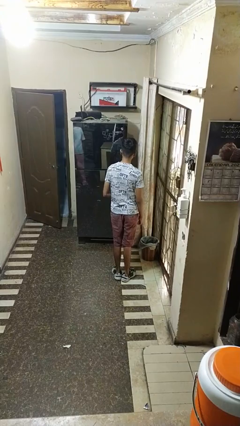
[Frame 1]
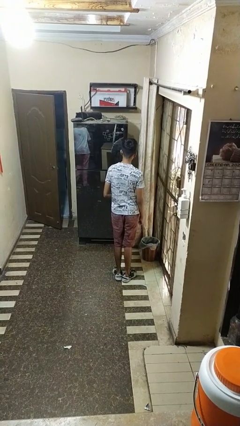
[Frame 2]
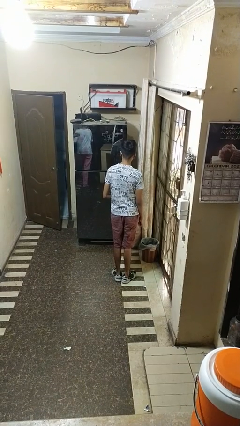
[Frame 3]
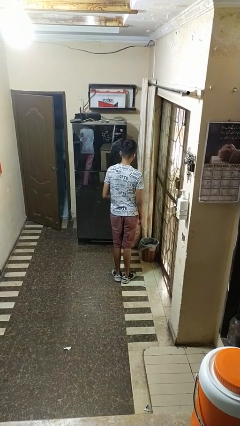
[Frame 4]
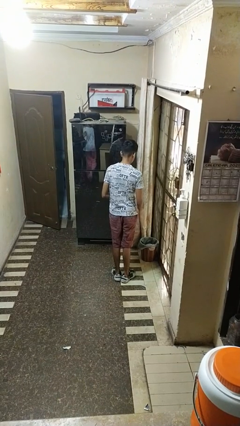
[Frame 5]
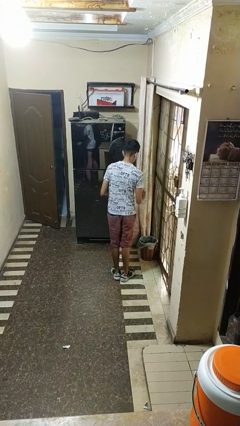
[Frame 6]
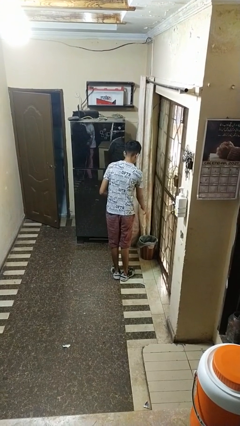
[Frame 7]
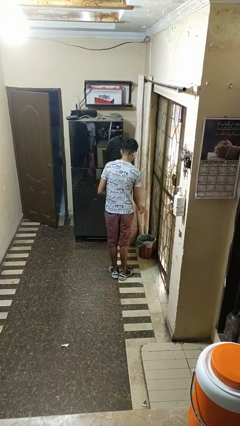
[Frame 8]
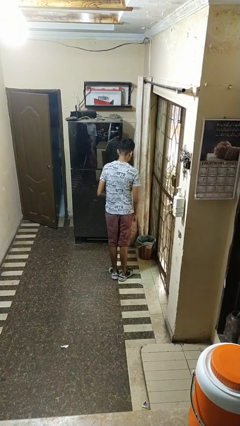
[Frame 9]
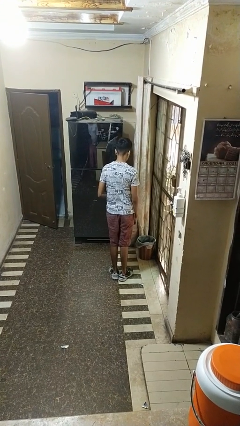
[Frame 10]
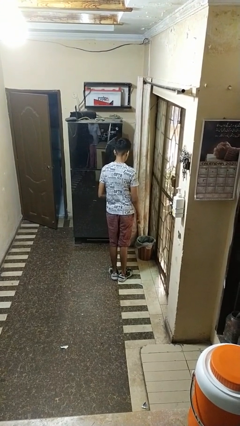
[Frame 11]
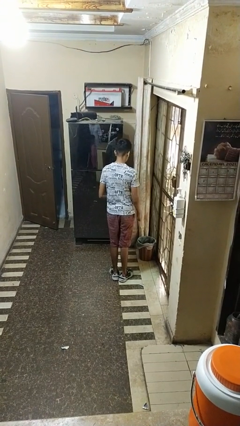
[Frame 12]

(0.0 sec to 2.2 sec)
person discards trash

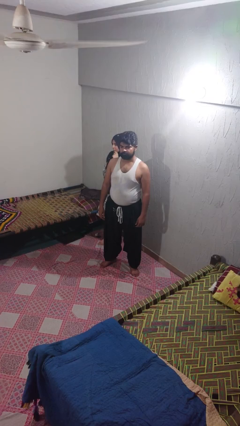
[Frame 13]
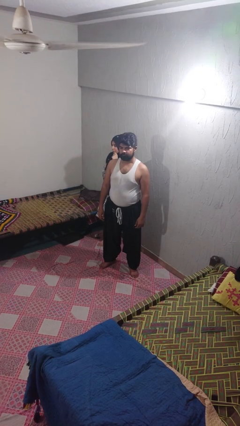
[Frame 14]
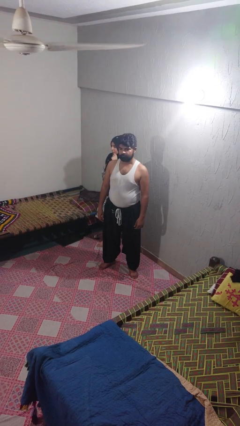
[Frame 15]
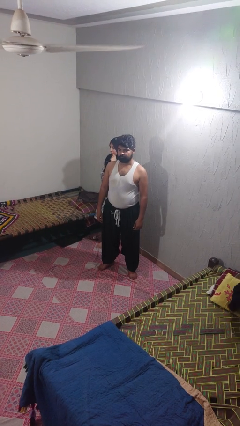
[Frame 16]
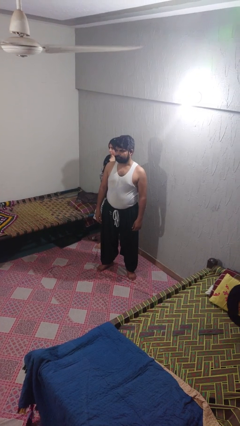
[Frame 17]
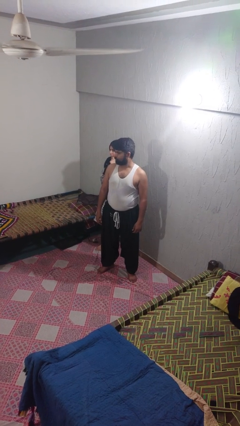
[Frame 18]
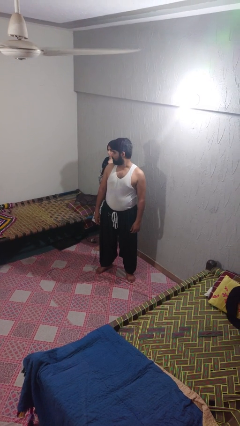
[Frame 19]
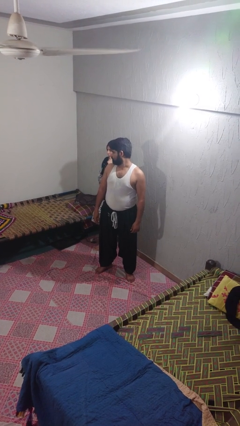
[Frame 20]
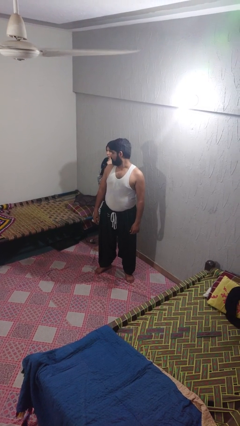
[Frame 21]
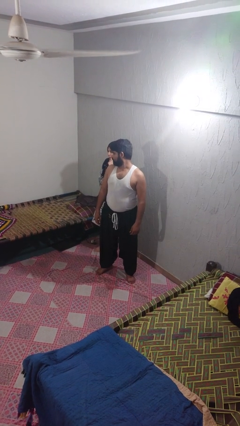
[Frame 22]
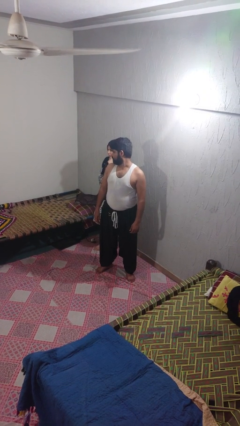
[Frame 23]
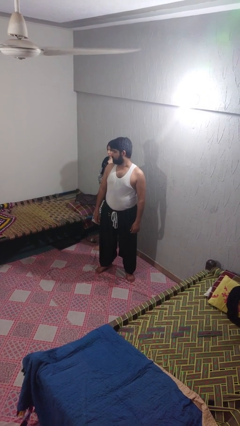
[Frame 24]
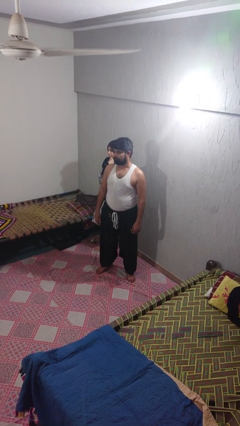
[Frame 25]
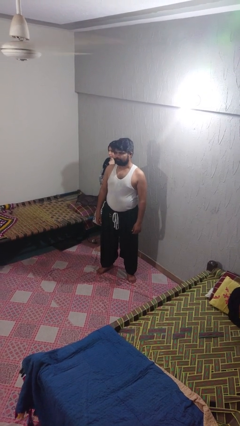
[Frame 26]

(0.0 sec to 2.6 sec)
person looks over shoulder

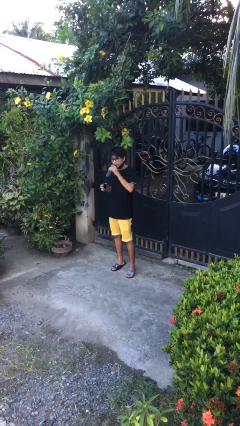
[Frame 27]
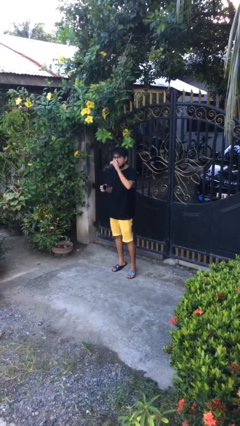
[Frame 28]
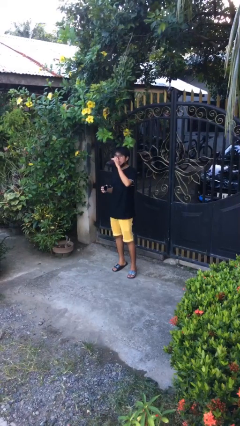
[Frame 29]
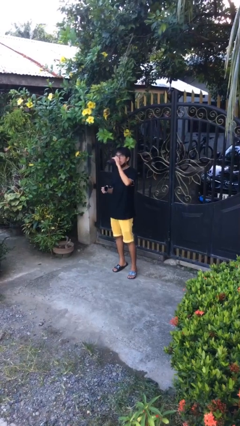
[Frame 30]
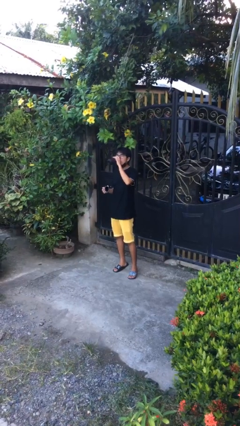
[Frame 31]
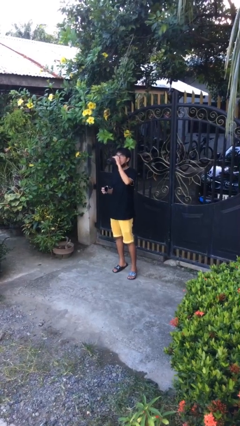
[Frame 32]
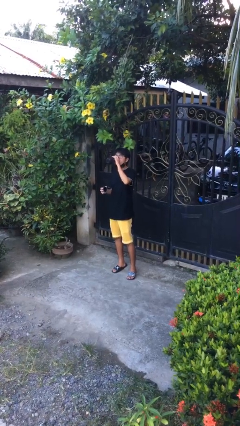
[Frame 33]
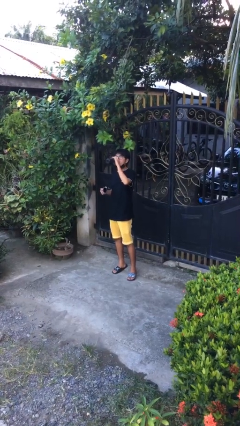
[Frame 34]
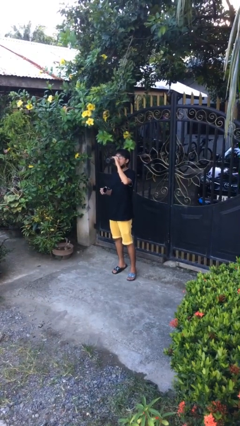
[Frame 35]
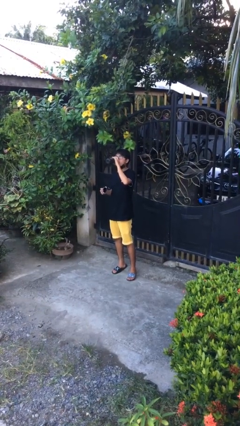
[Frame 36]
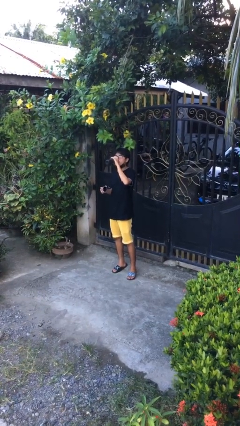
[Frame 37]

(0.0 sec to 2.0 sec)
person drinks from bottle

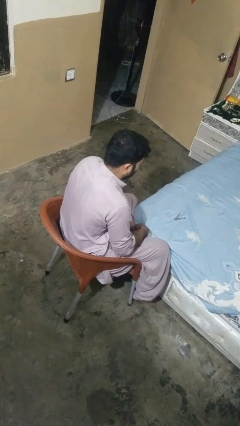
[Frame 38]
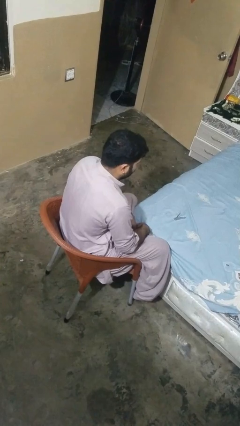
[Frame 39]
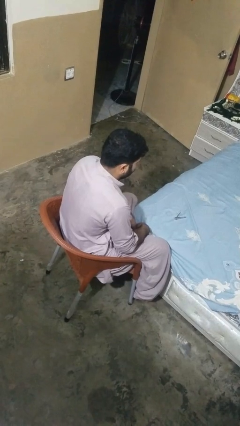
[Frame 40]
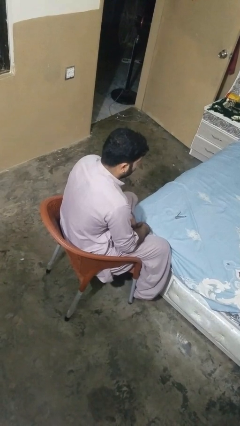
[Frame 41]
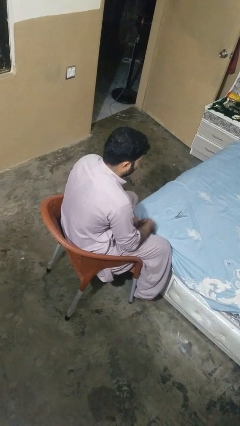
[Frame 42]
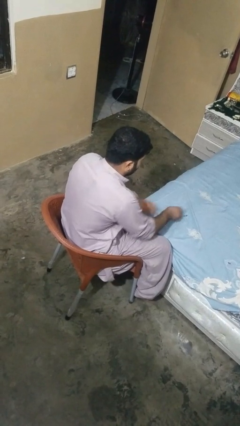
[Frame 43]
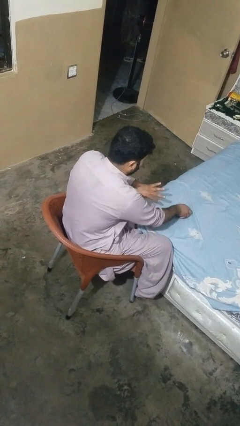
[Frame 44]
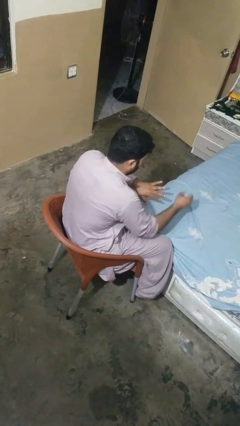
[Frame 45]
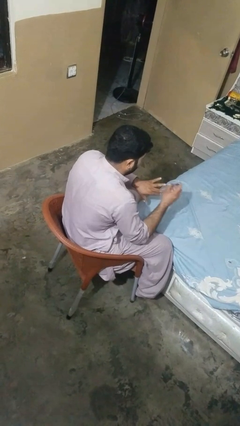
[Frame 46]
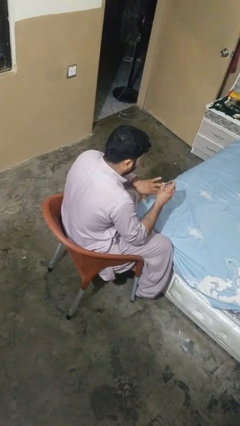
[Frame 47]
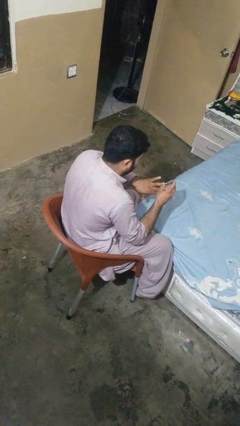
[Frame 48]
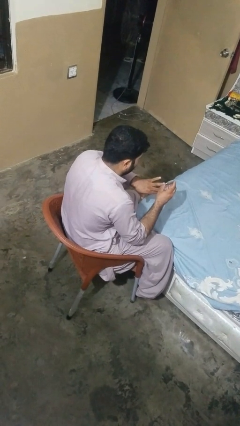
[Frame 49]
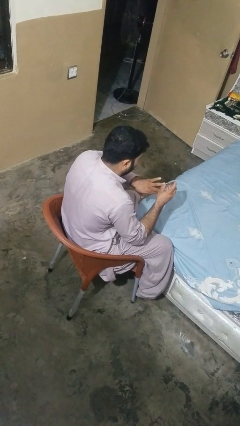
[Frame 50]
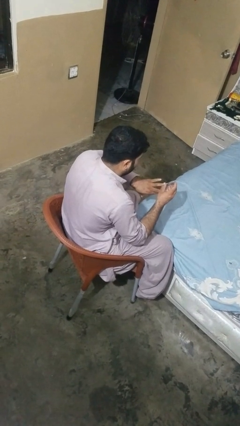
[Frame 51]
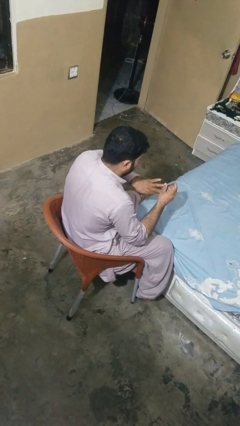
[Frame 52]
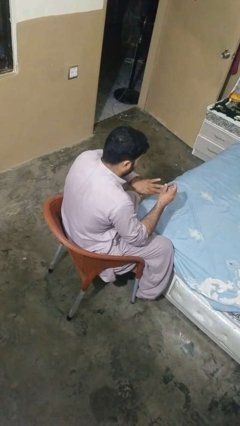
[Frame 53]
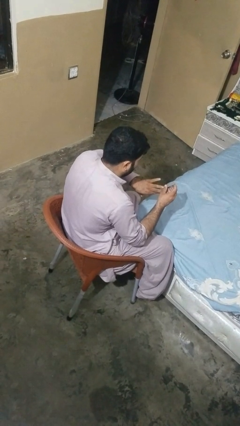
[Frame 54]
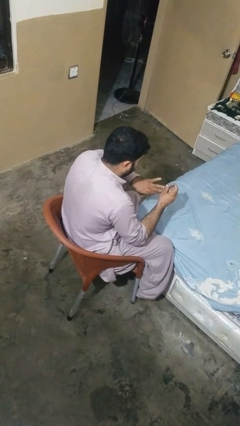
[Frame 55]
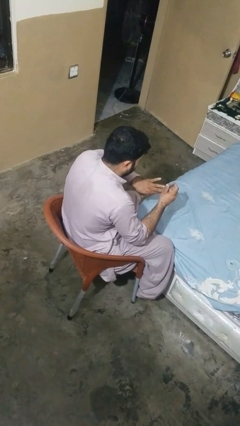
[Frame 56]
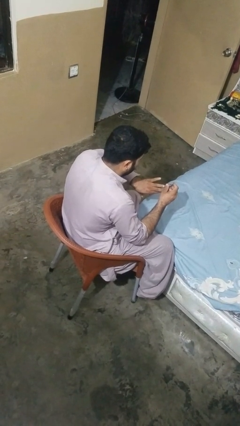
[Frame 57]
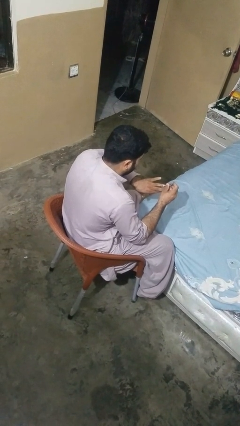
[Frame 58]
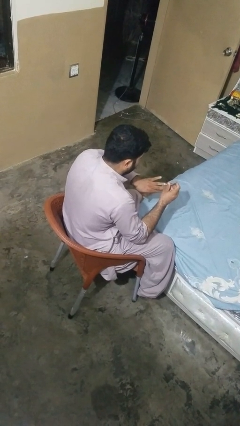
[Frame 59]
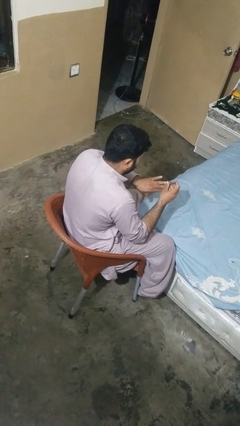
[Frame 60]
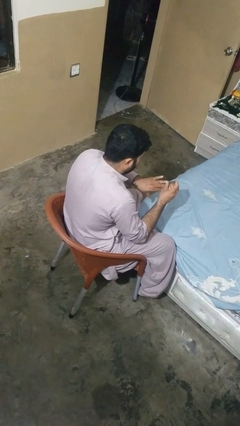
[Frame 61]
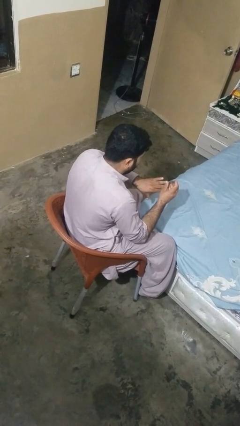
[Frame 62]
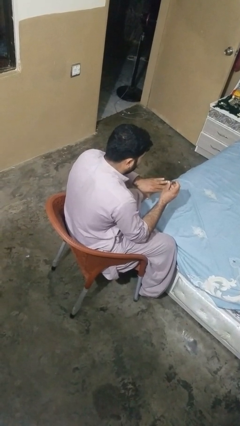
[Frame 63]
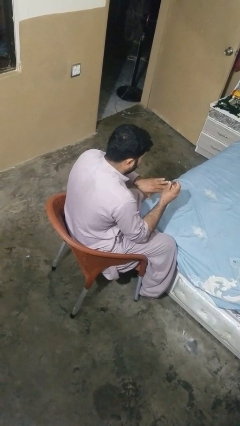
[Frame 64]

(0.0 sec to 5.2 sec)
person clips fingernails

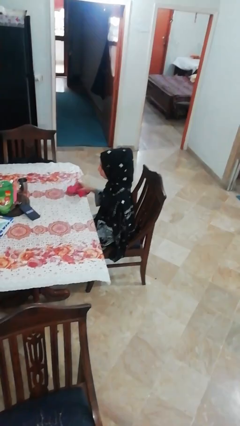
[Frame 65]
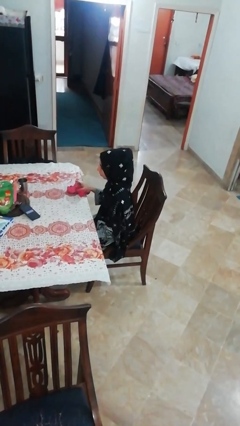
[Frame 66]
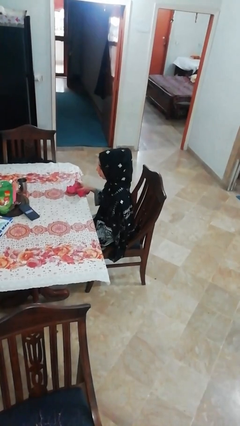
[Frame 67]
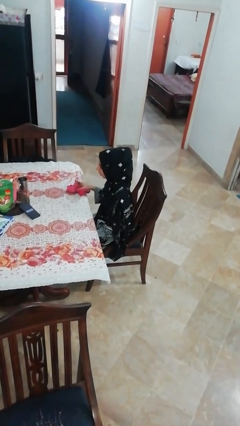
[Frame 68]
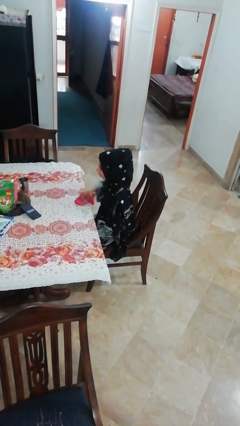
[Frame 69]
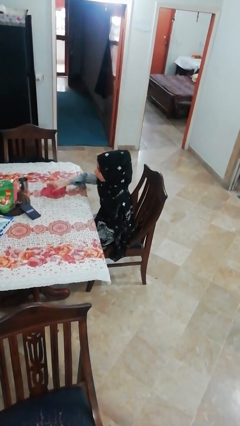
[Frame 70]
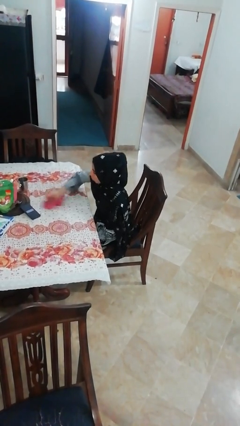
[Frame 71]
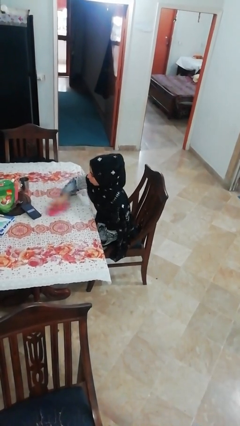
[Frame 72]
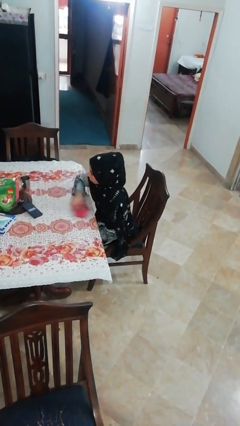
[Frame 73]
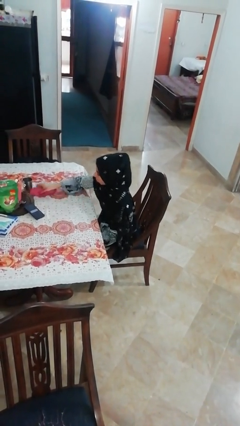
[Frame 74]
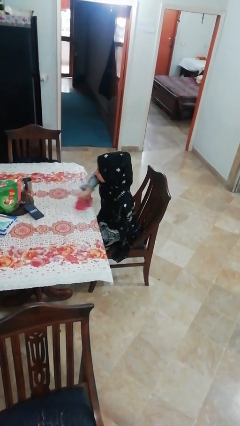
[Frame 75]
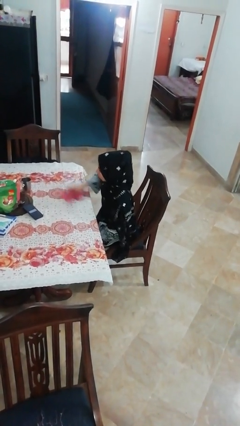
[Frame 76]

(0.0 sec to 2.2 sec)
person cleans table with rag

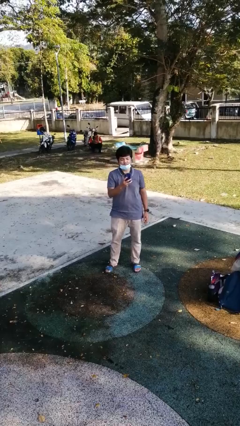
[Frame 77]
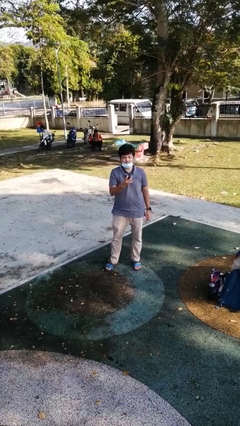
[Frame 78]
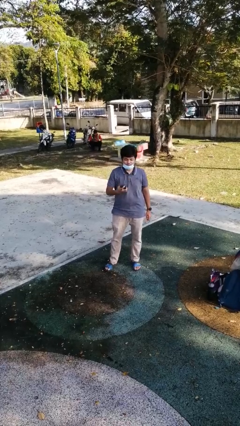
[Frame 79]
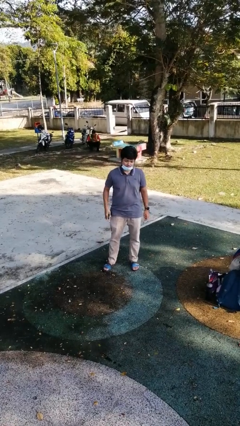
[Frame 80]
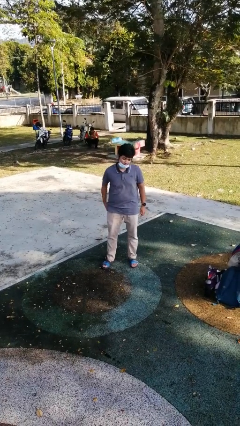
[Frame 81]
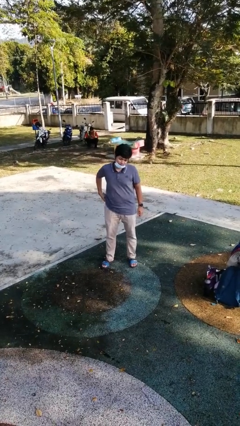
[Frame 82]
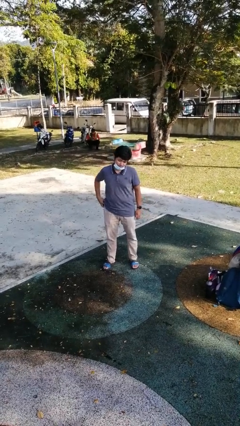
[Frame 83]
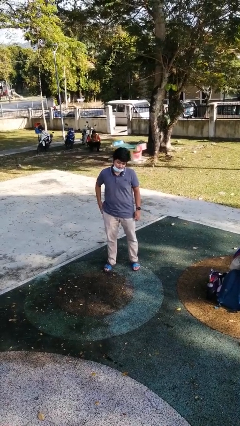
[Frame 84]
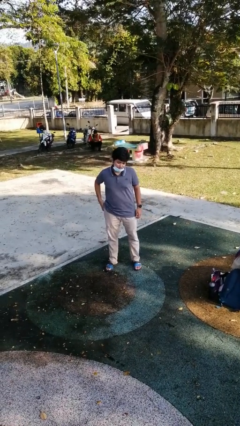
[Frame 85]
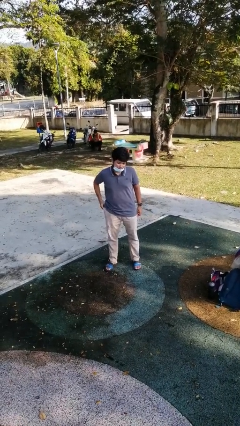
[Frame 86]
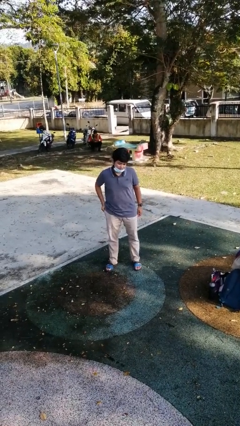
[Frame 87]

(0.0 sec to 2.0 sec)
person puts phone into pocket

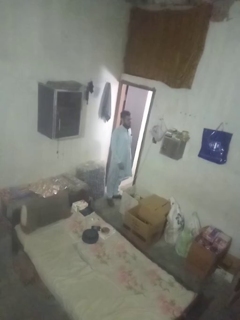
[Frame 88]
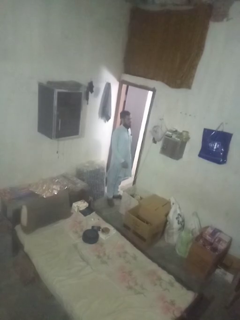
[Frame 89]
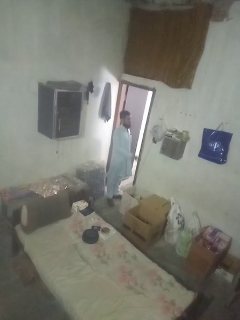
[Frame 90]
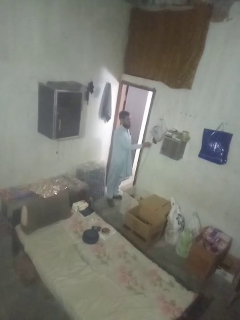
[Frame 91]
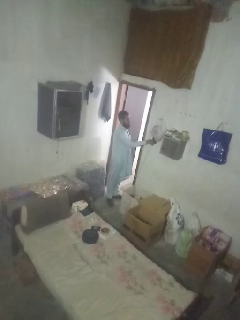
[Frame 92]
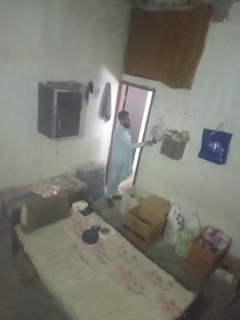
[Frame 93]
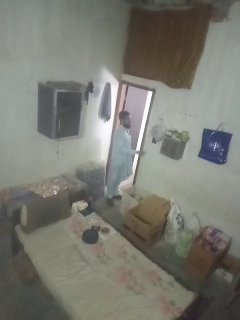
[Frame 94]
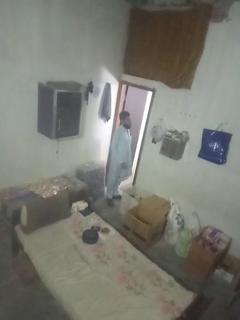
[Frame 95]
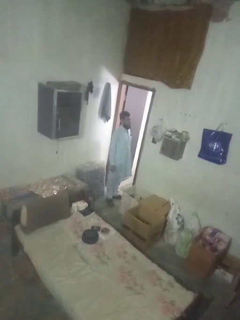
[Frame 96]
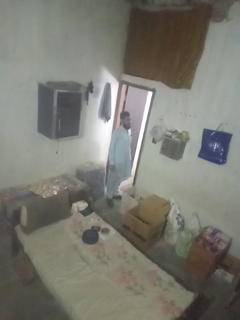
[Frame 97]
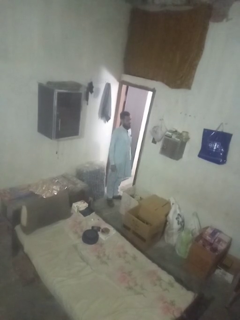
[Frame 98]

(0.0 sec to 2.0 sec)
person unplugs from electrical socket
